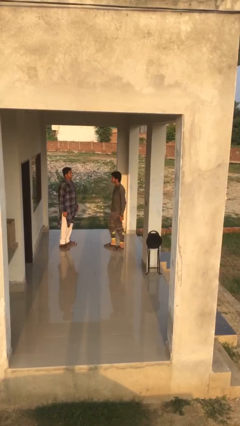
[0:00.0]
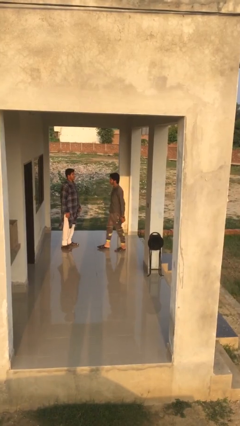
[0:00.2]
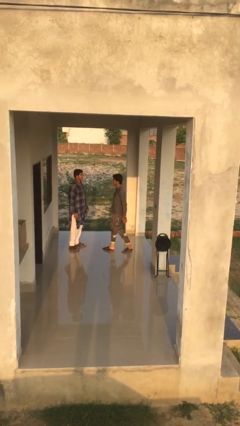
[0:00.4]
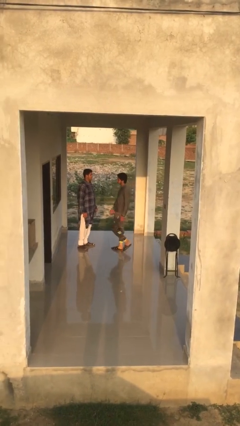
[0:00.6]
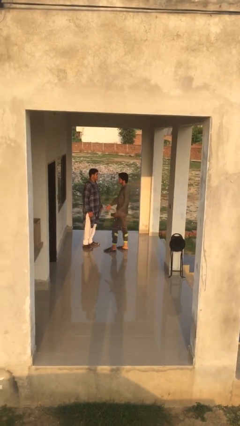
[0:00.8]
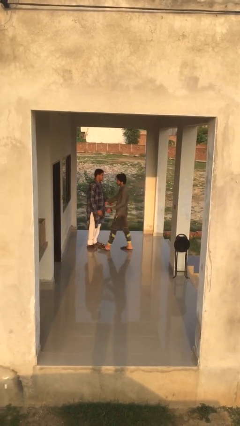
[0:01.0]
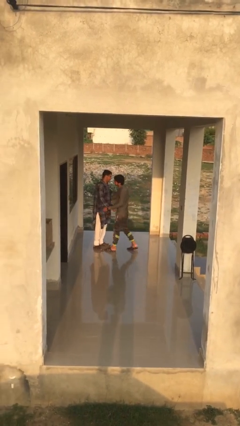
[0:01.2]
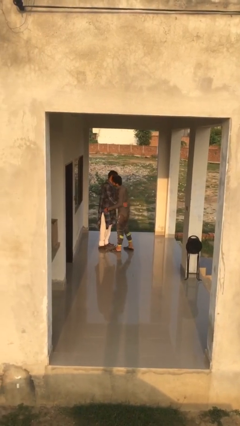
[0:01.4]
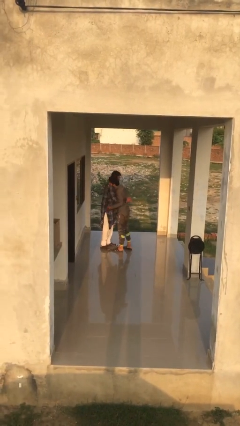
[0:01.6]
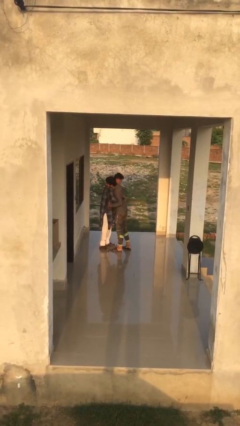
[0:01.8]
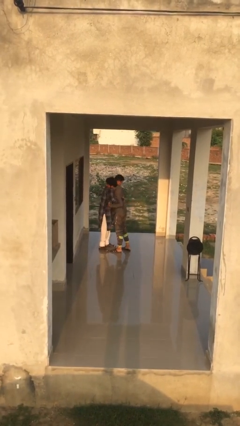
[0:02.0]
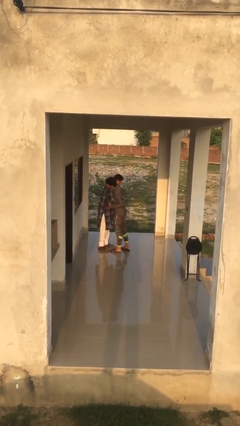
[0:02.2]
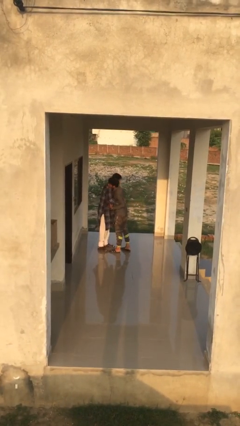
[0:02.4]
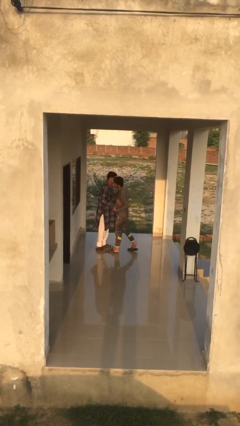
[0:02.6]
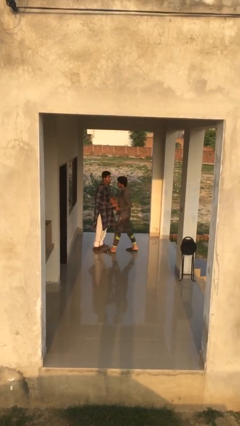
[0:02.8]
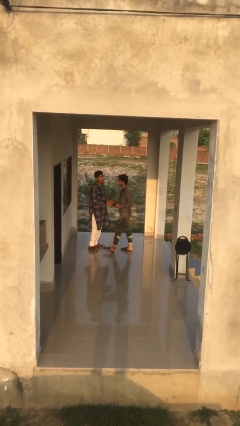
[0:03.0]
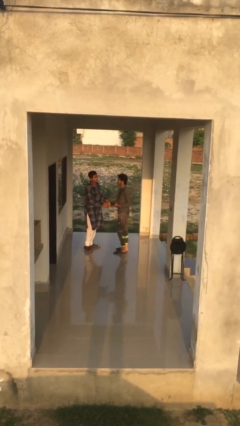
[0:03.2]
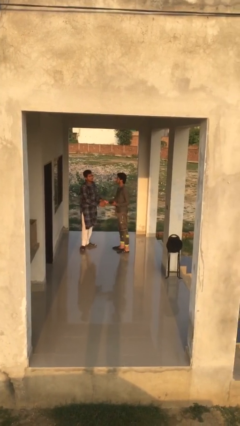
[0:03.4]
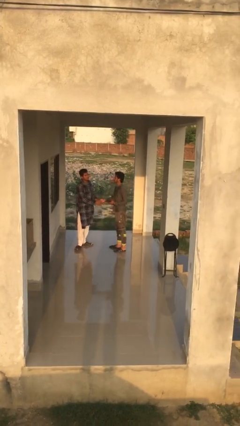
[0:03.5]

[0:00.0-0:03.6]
person embraces person

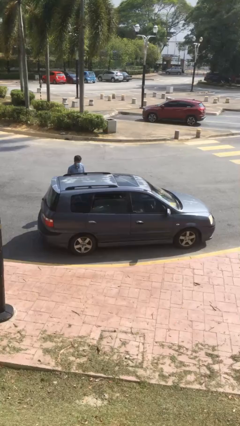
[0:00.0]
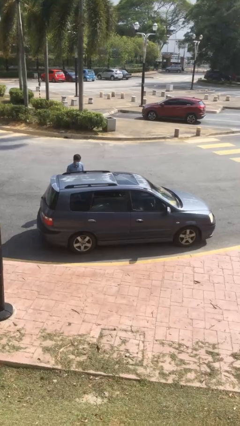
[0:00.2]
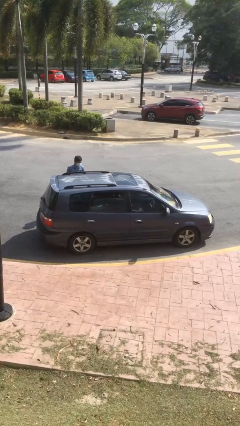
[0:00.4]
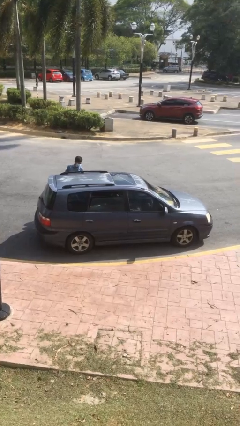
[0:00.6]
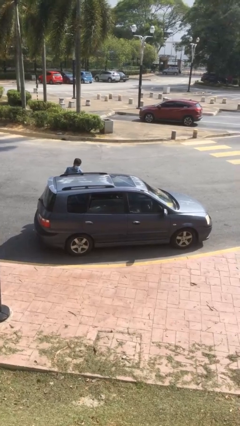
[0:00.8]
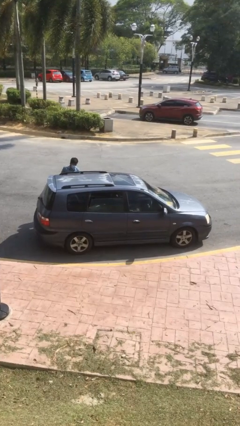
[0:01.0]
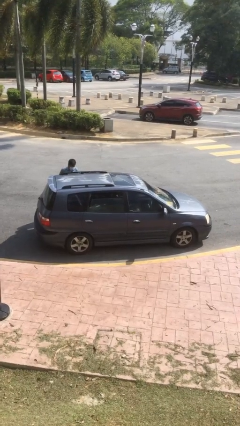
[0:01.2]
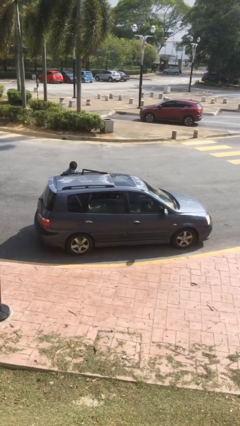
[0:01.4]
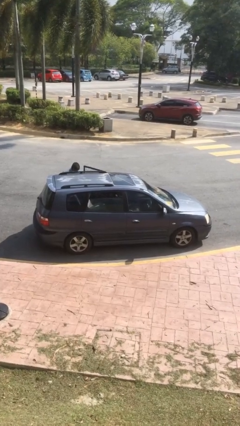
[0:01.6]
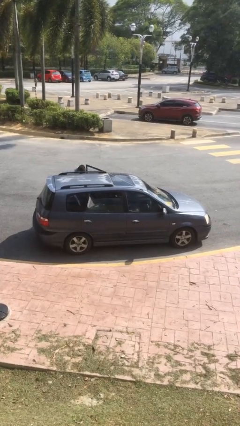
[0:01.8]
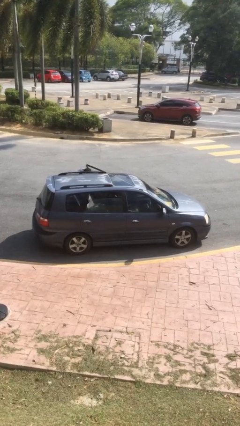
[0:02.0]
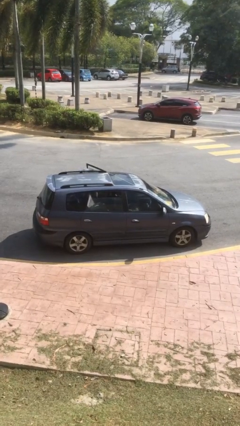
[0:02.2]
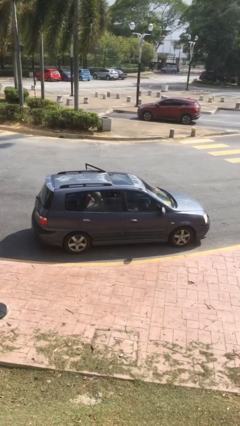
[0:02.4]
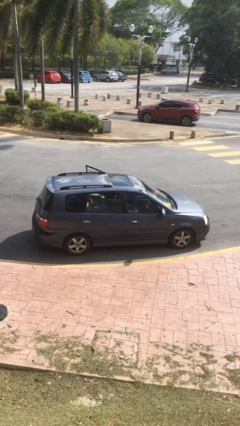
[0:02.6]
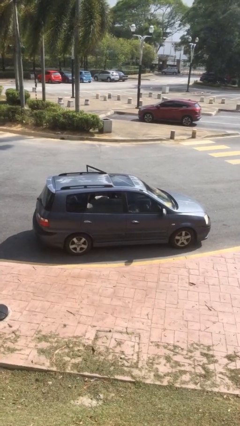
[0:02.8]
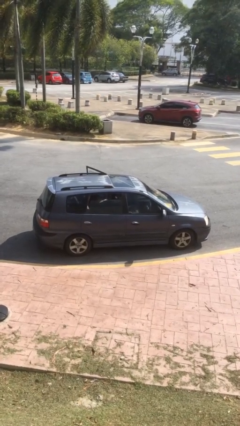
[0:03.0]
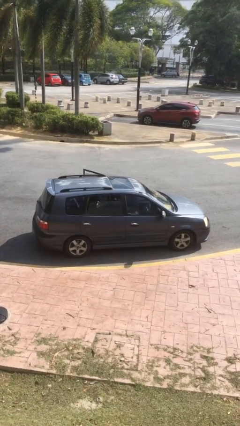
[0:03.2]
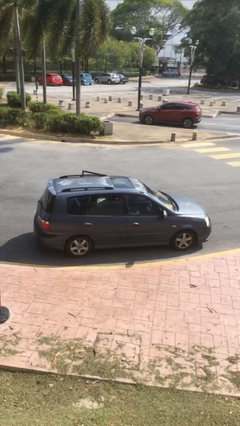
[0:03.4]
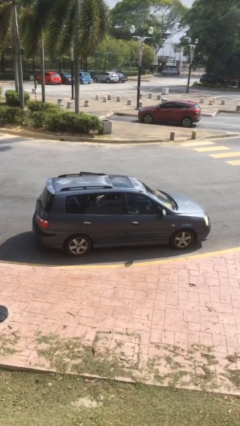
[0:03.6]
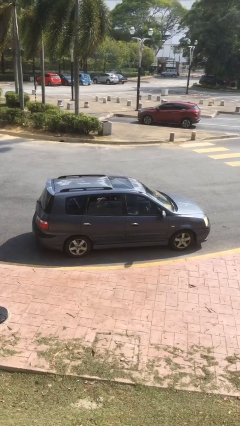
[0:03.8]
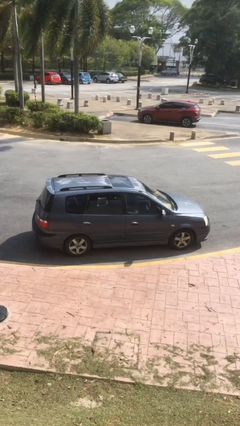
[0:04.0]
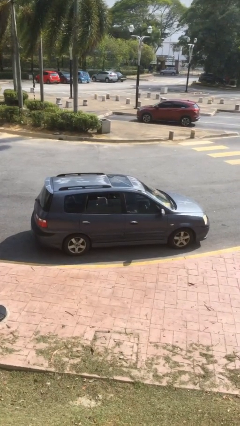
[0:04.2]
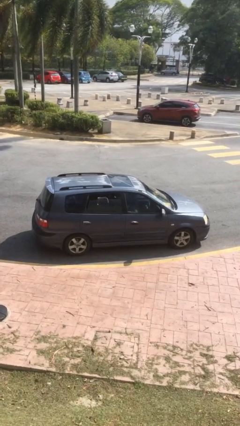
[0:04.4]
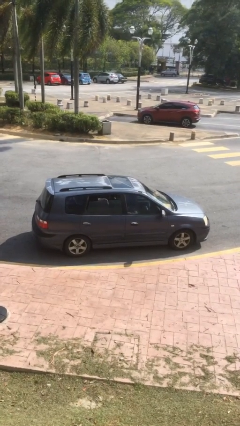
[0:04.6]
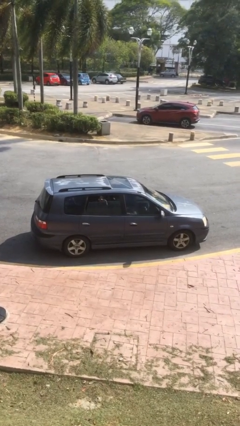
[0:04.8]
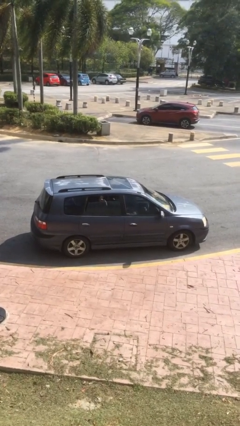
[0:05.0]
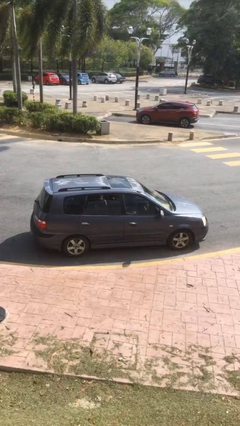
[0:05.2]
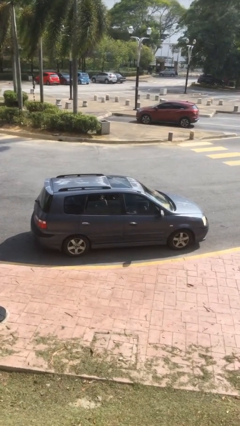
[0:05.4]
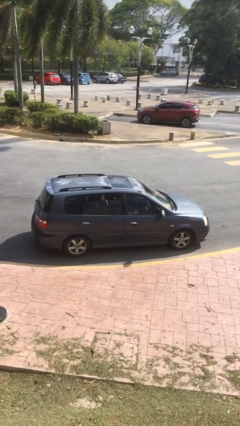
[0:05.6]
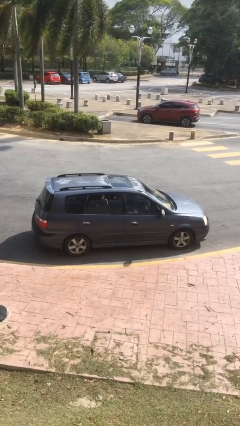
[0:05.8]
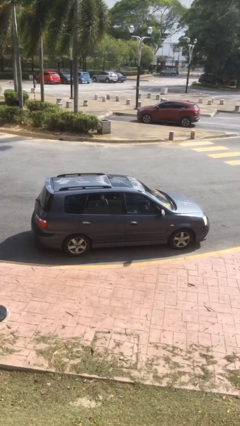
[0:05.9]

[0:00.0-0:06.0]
car picks up person

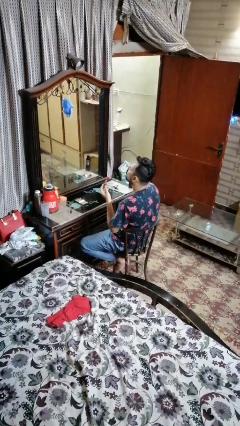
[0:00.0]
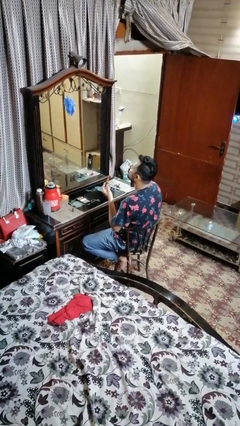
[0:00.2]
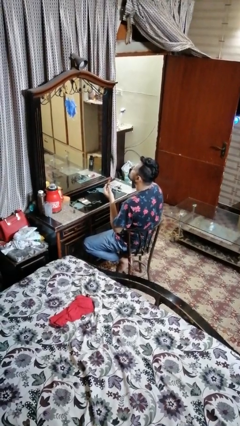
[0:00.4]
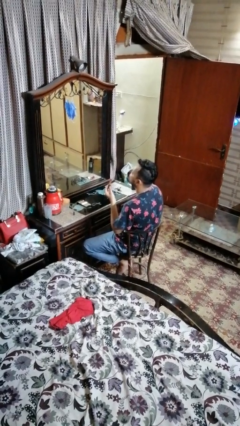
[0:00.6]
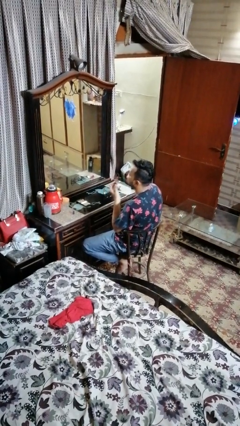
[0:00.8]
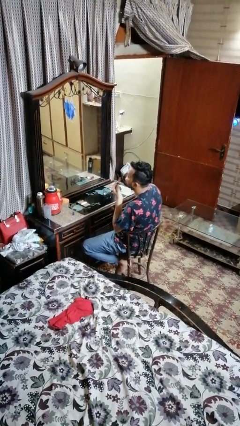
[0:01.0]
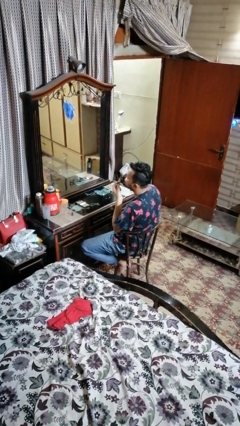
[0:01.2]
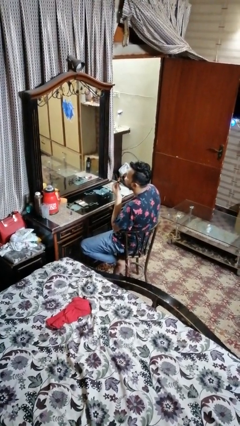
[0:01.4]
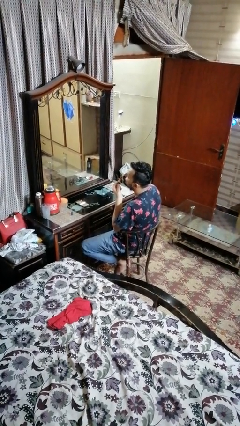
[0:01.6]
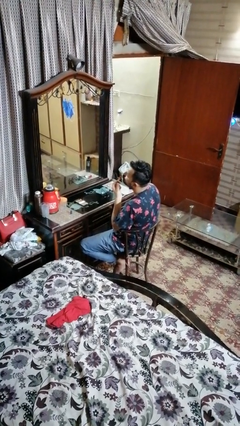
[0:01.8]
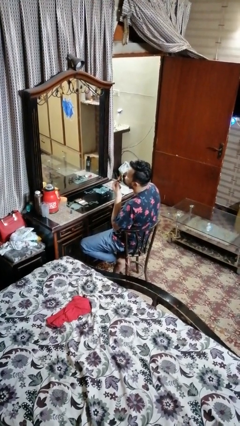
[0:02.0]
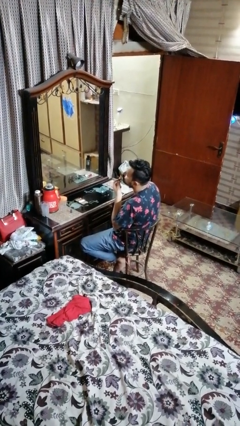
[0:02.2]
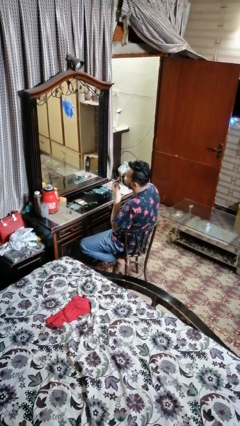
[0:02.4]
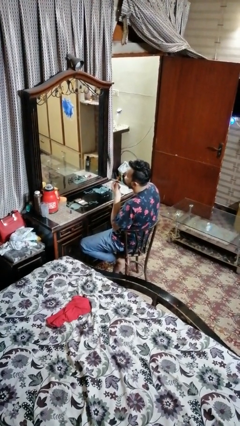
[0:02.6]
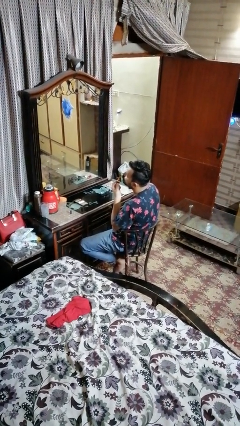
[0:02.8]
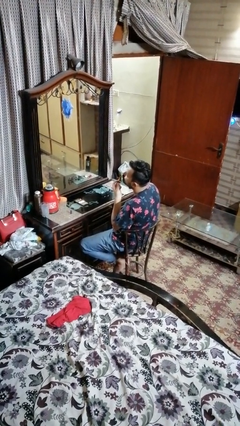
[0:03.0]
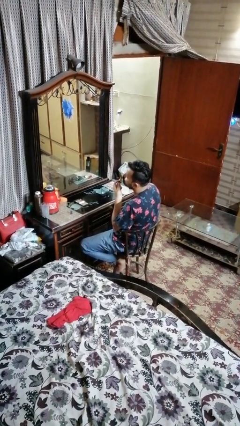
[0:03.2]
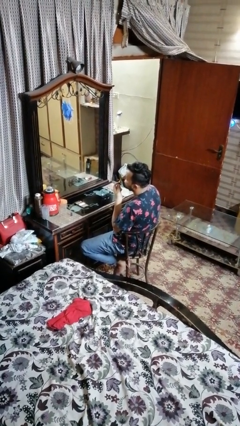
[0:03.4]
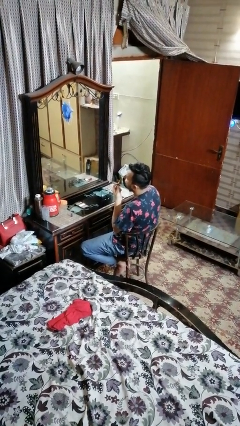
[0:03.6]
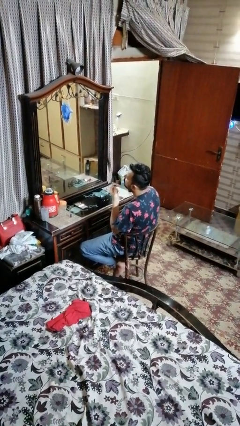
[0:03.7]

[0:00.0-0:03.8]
person applies lip makeup

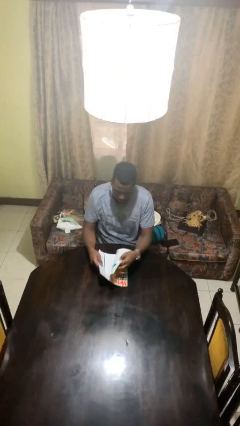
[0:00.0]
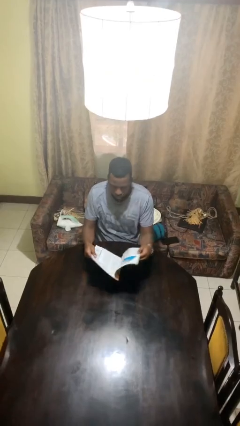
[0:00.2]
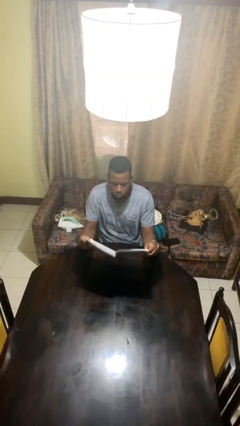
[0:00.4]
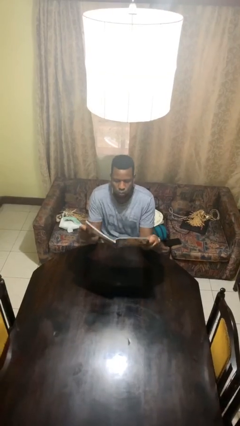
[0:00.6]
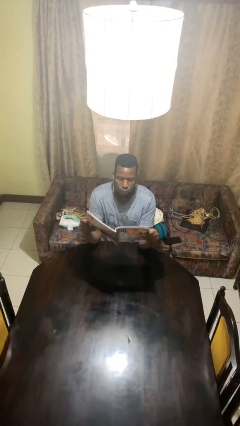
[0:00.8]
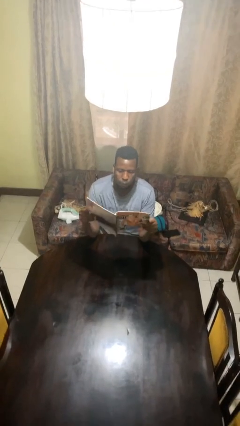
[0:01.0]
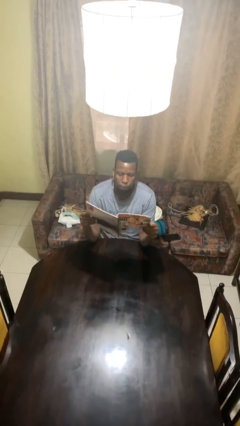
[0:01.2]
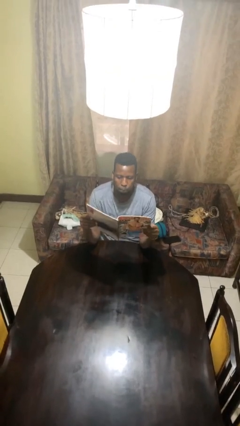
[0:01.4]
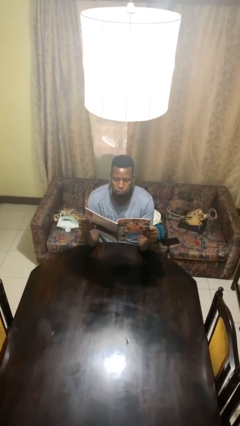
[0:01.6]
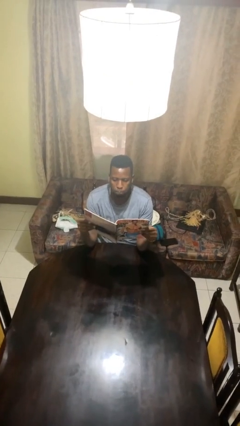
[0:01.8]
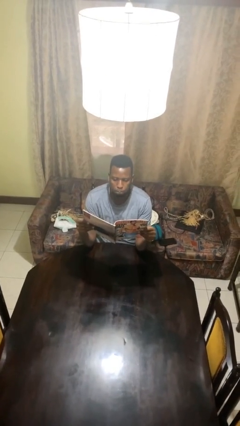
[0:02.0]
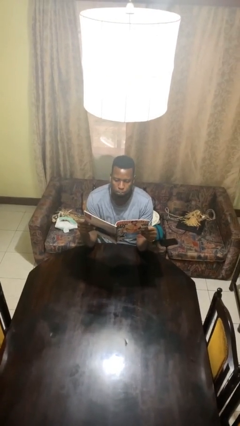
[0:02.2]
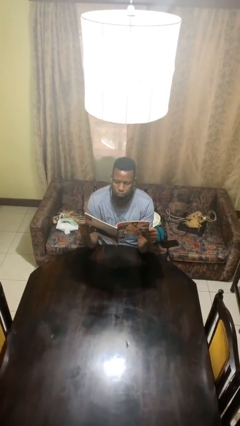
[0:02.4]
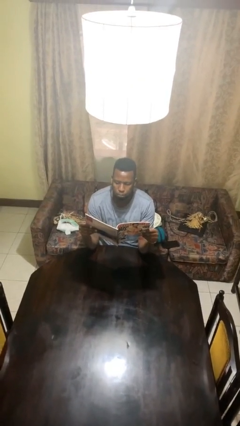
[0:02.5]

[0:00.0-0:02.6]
person reads document

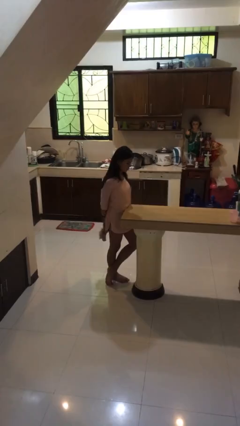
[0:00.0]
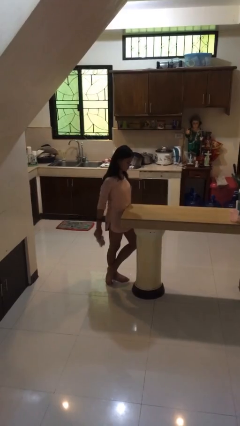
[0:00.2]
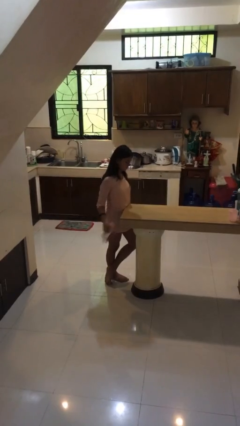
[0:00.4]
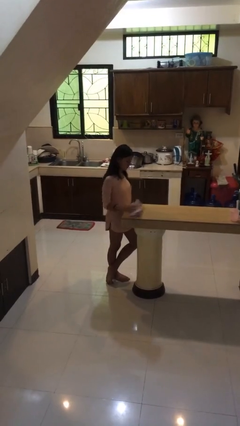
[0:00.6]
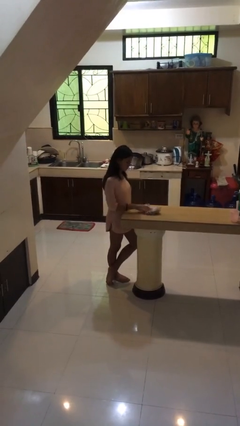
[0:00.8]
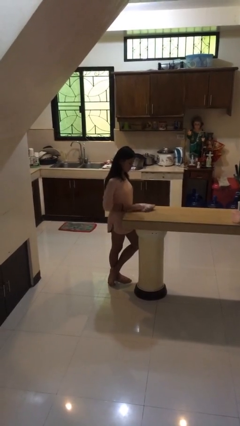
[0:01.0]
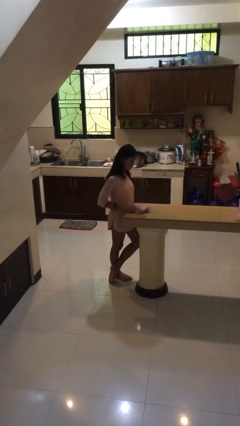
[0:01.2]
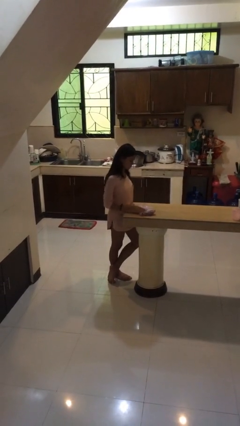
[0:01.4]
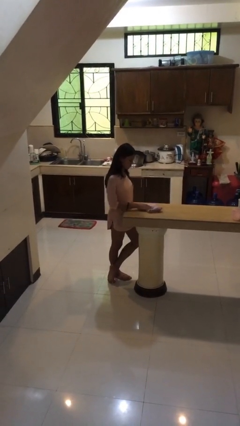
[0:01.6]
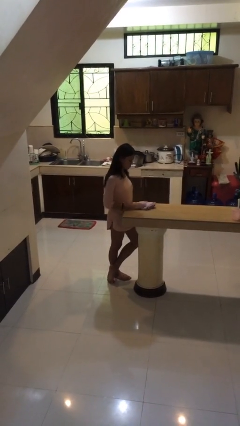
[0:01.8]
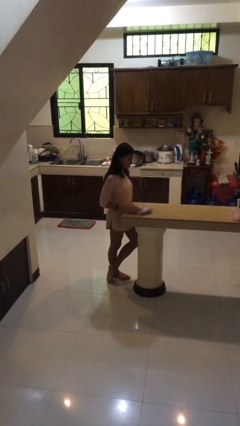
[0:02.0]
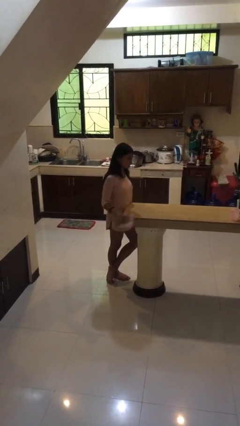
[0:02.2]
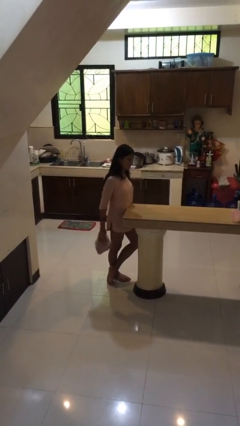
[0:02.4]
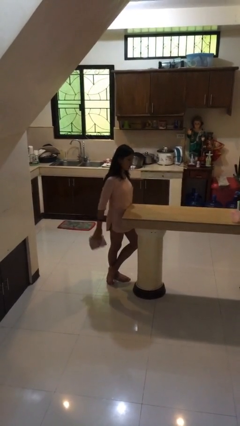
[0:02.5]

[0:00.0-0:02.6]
person cleans table with rag
